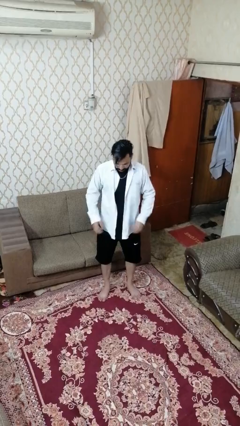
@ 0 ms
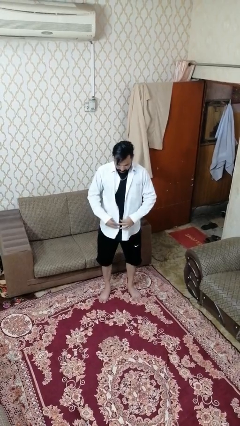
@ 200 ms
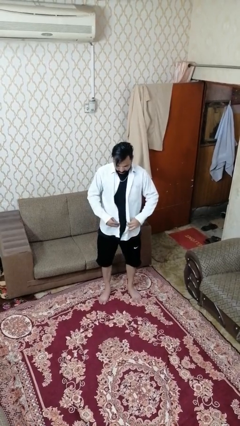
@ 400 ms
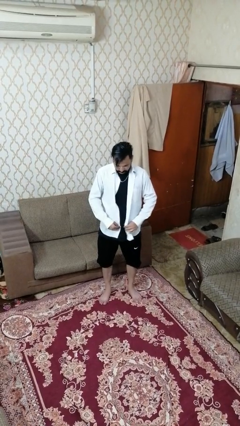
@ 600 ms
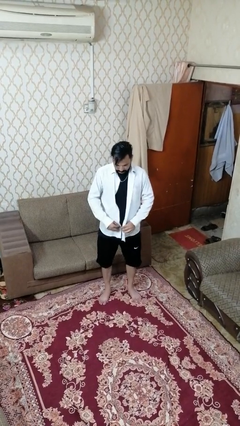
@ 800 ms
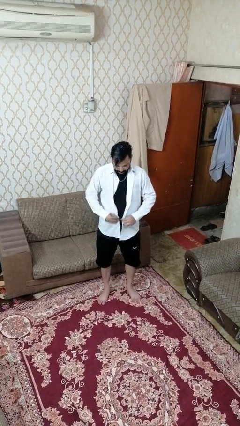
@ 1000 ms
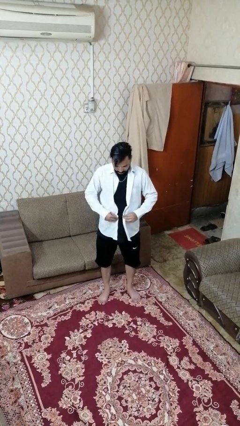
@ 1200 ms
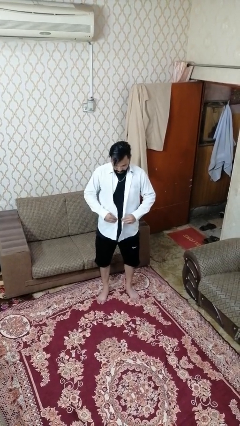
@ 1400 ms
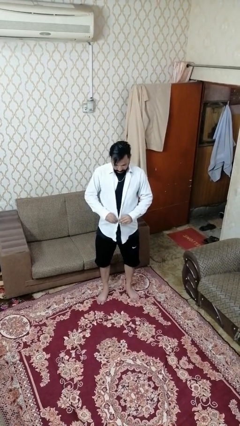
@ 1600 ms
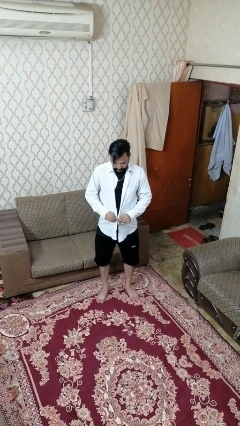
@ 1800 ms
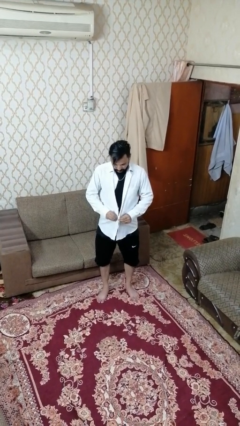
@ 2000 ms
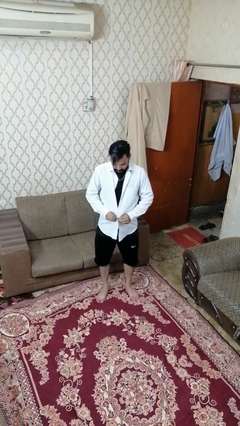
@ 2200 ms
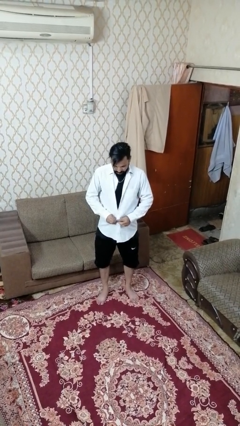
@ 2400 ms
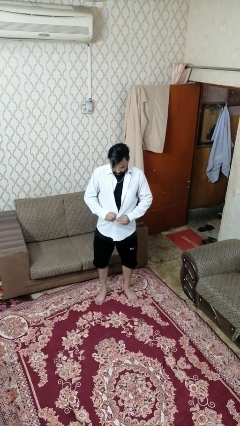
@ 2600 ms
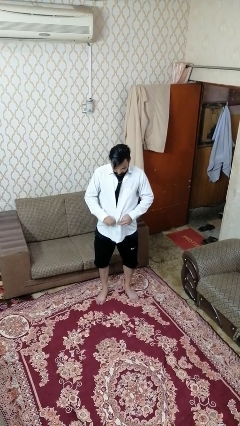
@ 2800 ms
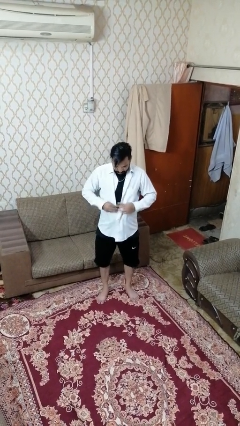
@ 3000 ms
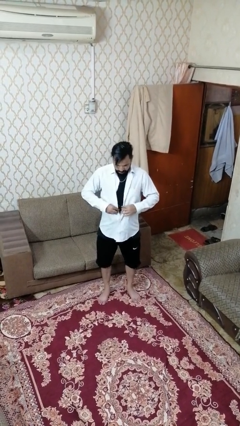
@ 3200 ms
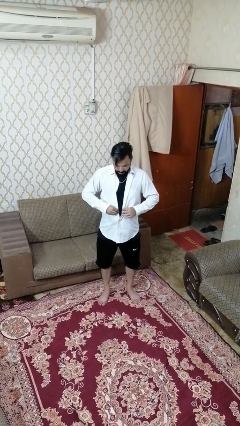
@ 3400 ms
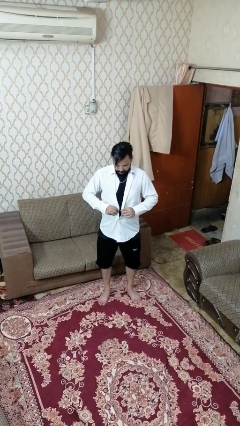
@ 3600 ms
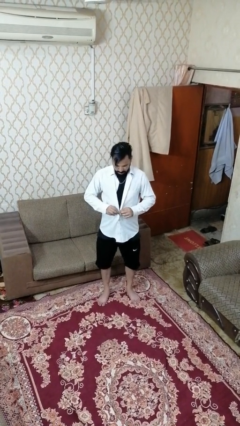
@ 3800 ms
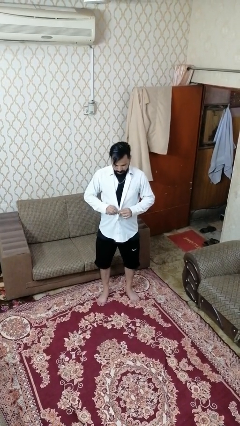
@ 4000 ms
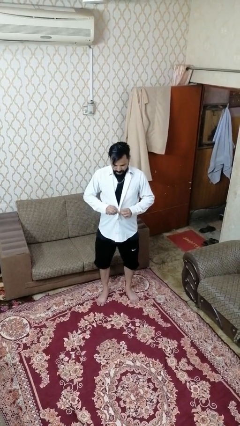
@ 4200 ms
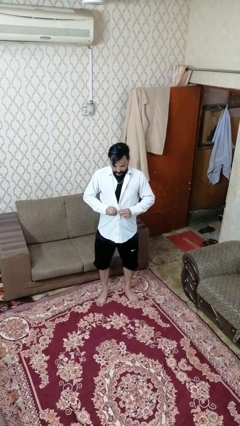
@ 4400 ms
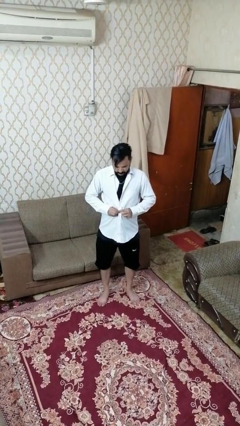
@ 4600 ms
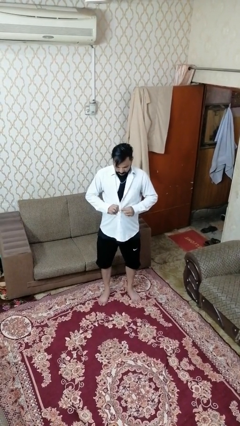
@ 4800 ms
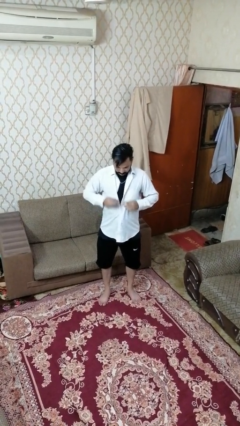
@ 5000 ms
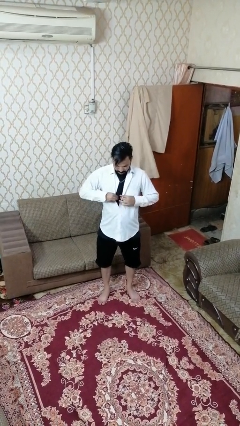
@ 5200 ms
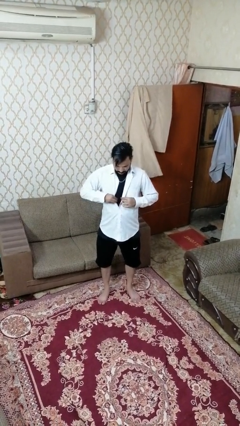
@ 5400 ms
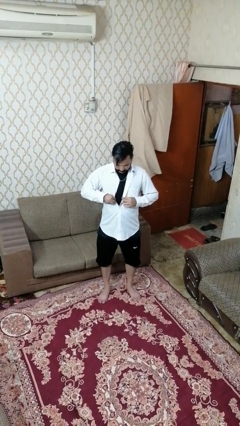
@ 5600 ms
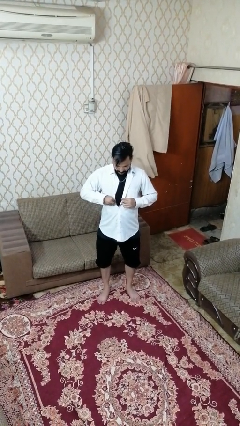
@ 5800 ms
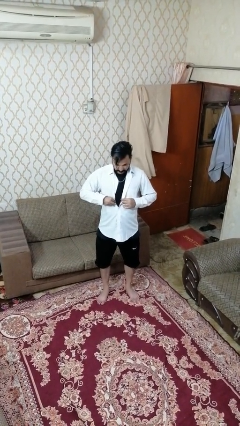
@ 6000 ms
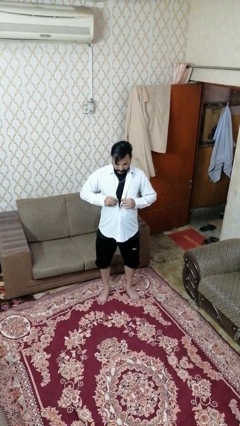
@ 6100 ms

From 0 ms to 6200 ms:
person buttons shirt

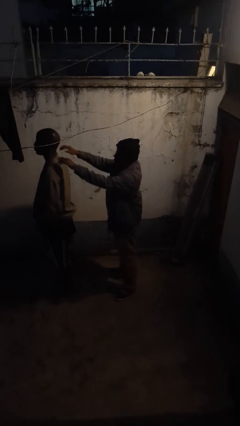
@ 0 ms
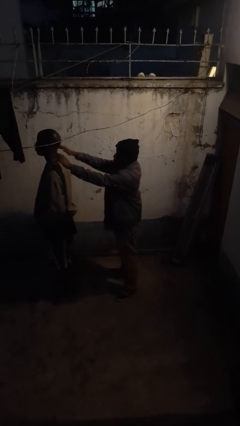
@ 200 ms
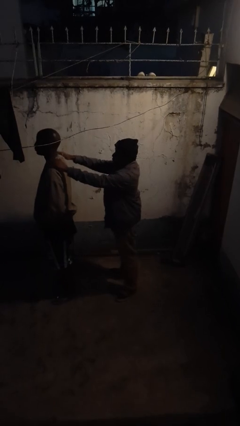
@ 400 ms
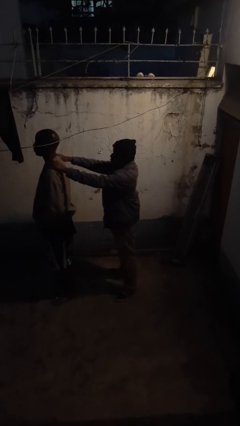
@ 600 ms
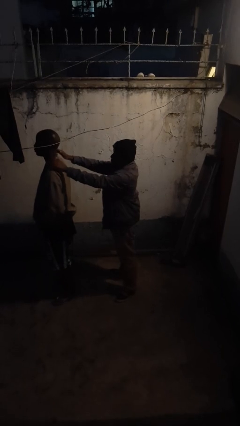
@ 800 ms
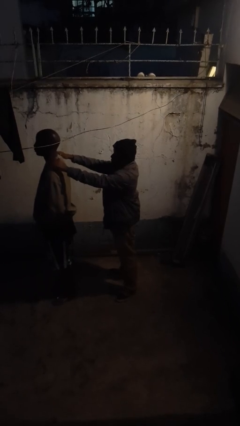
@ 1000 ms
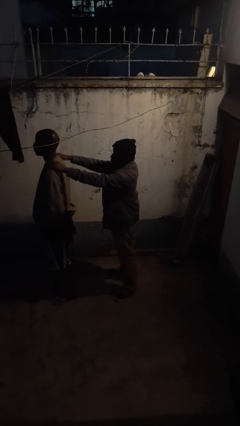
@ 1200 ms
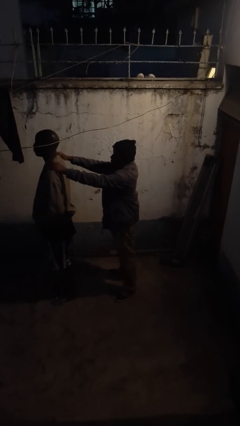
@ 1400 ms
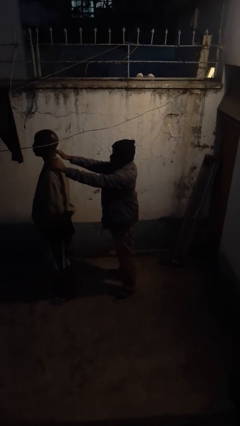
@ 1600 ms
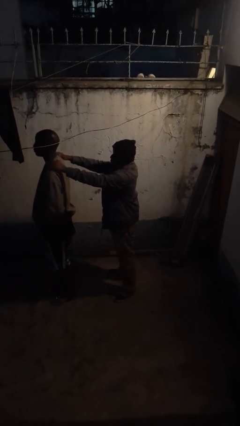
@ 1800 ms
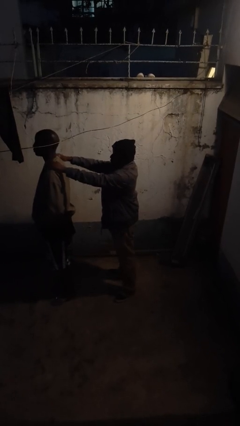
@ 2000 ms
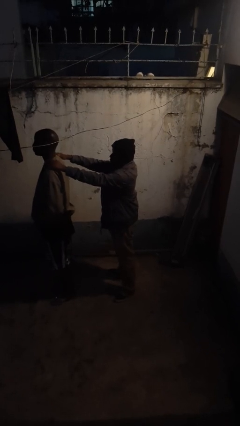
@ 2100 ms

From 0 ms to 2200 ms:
person pounds shoulders of person

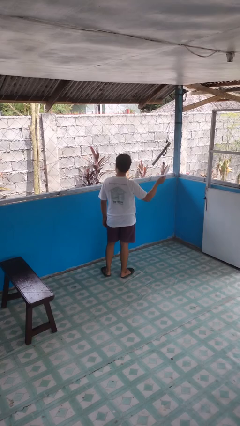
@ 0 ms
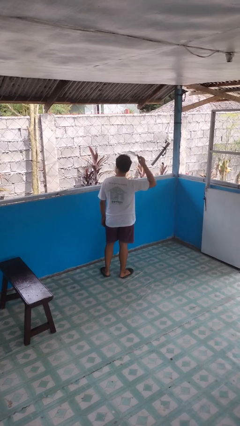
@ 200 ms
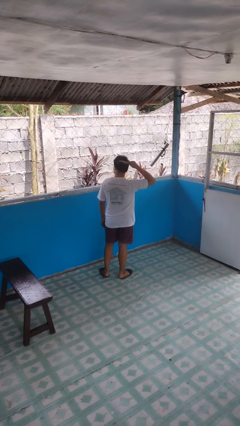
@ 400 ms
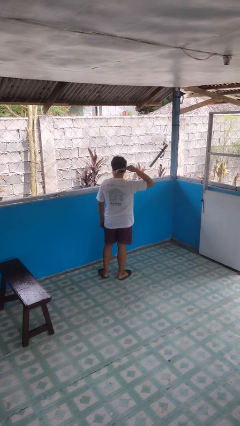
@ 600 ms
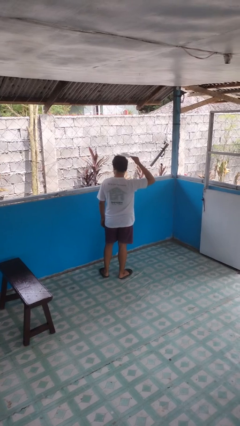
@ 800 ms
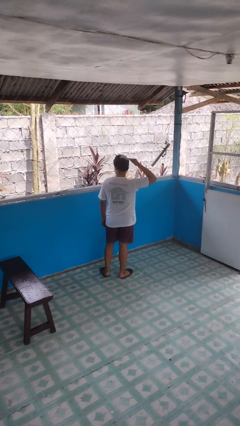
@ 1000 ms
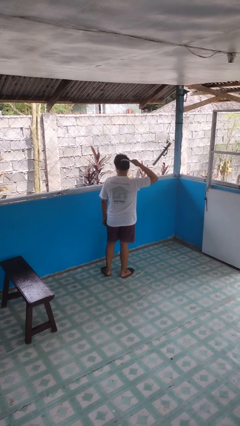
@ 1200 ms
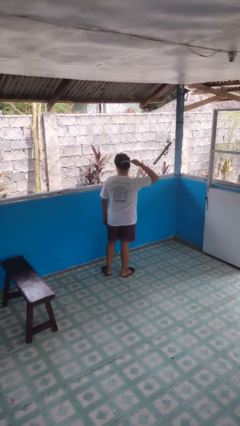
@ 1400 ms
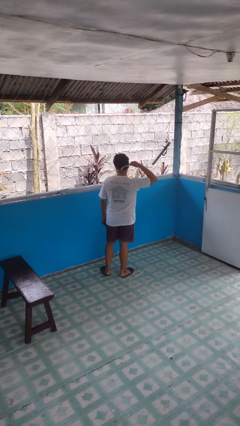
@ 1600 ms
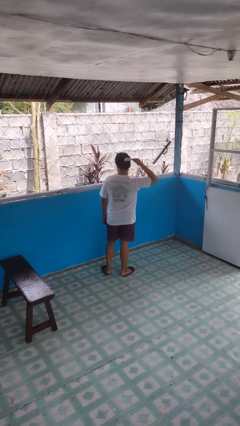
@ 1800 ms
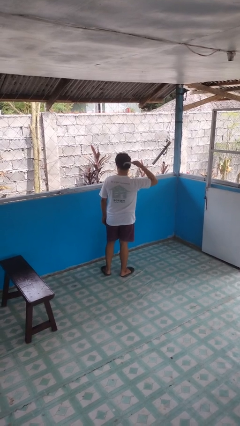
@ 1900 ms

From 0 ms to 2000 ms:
person brushes hair

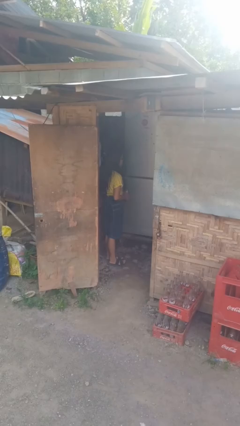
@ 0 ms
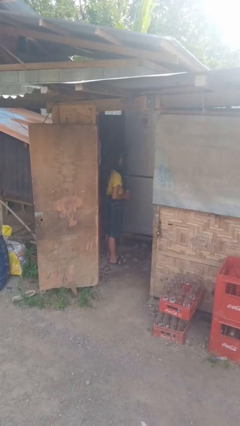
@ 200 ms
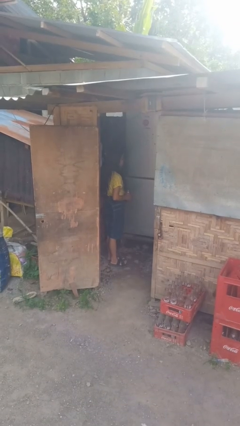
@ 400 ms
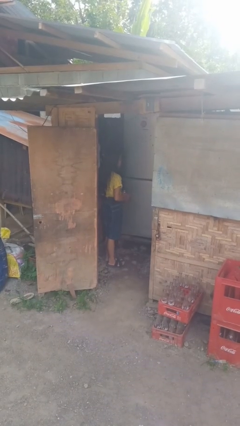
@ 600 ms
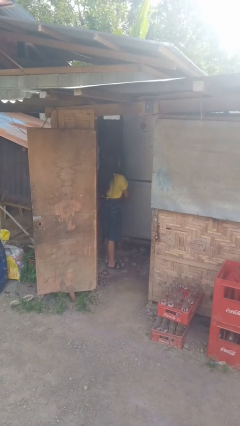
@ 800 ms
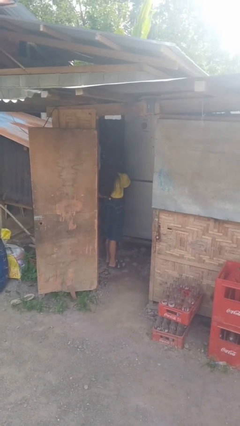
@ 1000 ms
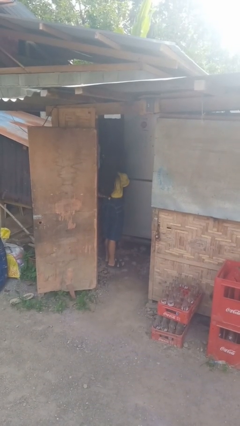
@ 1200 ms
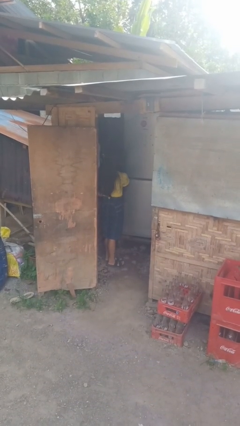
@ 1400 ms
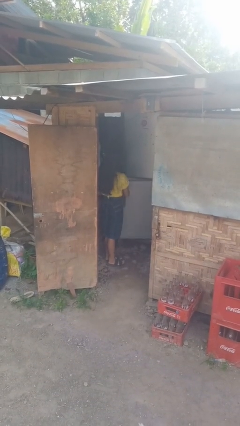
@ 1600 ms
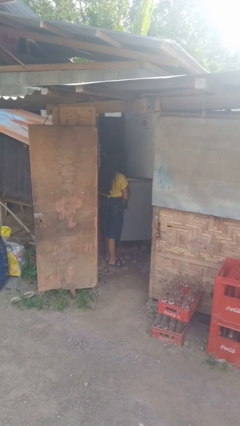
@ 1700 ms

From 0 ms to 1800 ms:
person opens refrigerator

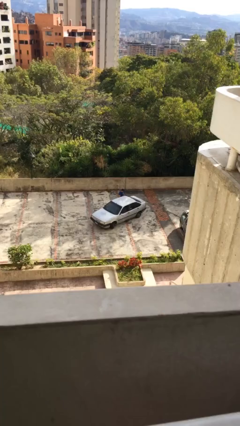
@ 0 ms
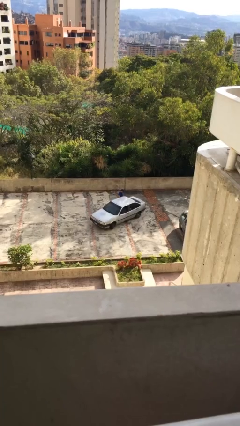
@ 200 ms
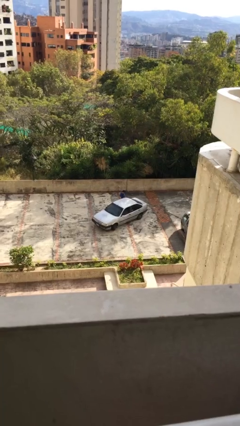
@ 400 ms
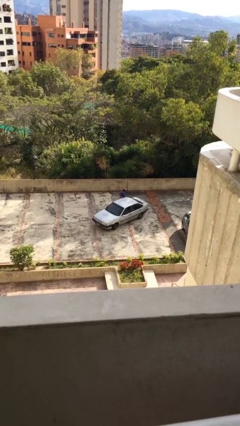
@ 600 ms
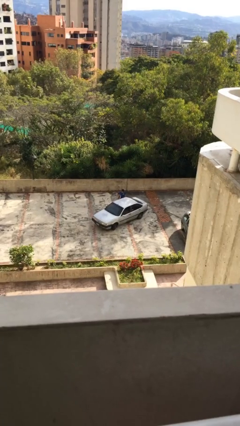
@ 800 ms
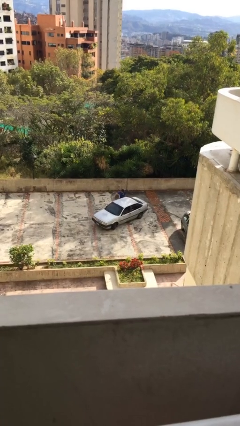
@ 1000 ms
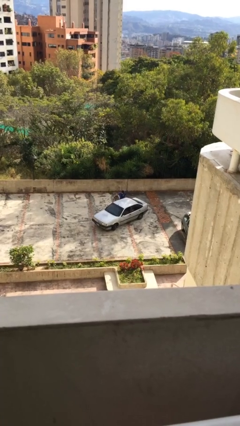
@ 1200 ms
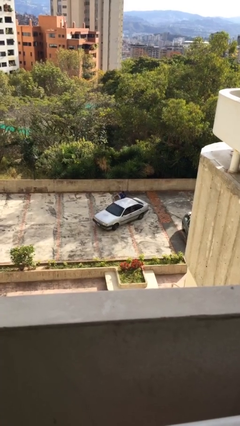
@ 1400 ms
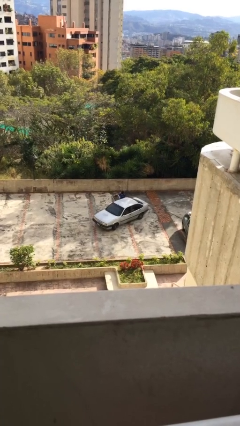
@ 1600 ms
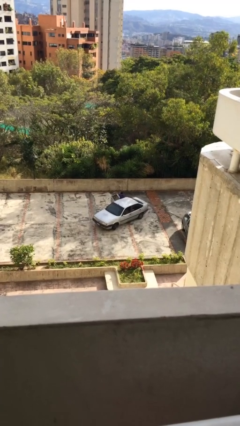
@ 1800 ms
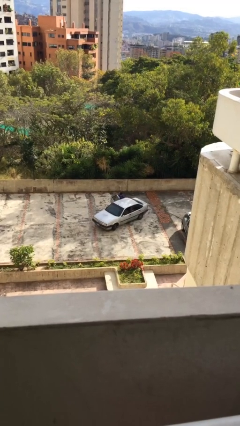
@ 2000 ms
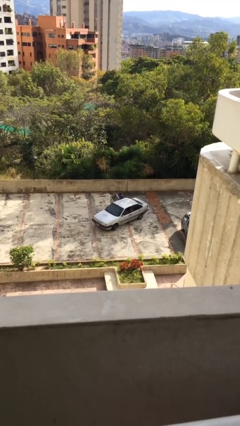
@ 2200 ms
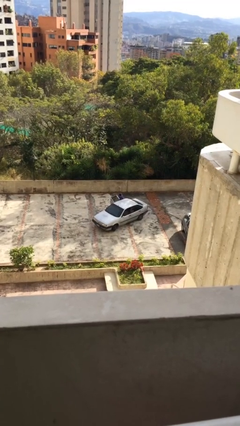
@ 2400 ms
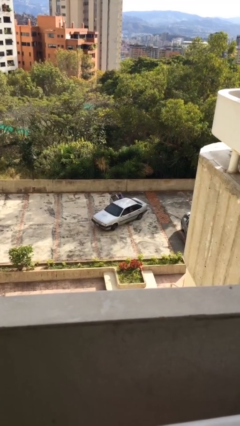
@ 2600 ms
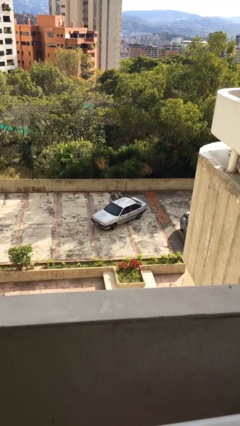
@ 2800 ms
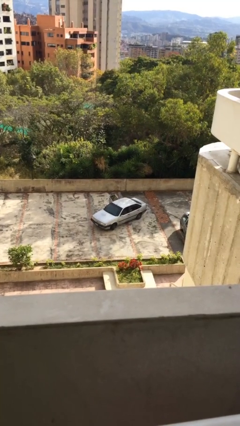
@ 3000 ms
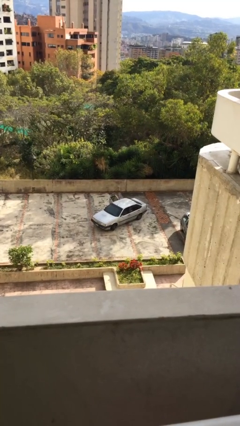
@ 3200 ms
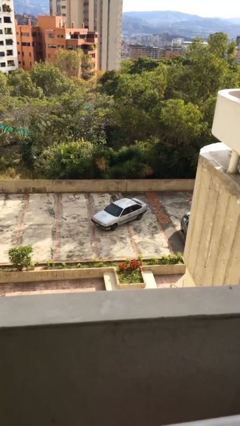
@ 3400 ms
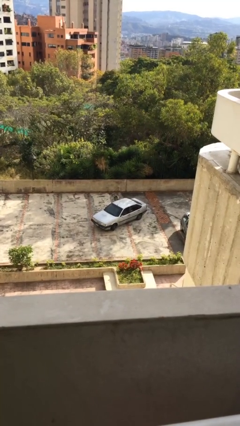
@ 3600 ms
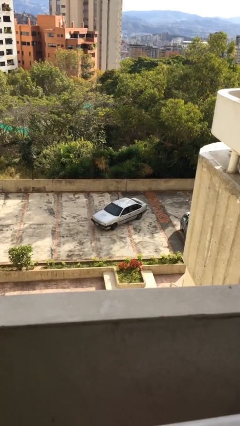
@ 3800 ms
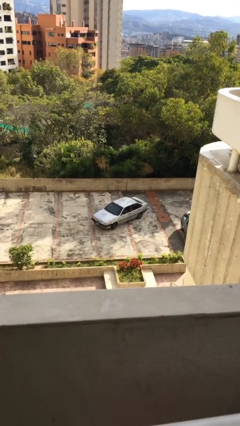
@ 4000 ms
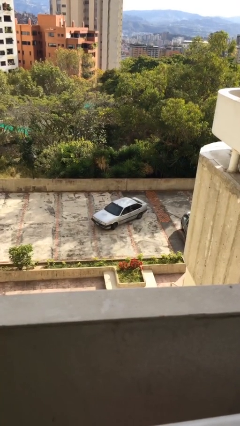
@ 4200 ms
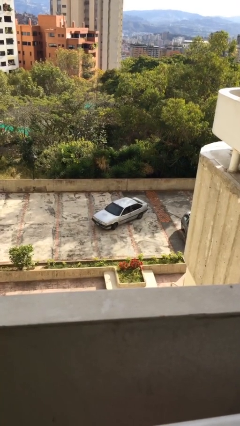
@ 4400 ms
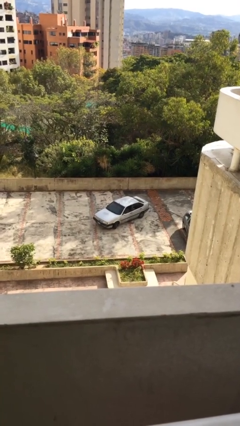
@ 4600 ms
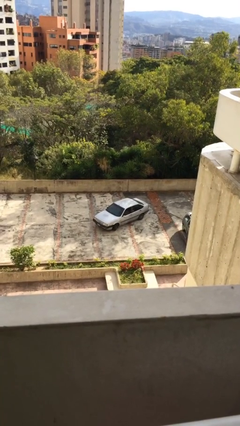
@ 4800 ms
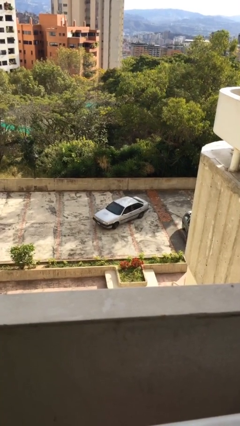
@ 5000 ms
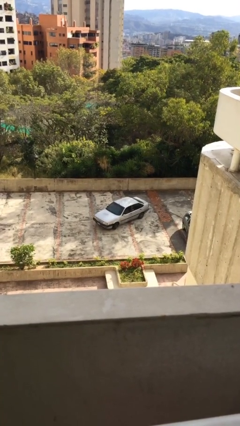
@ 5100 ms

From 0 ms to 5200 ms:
car picks up person

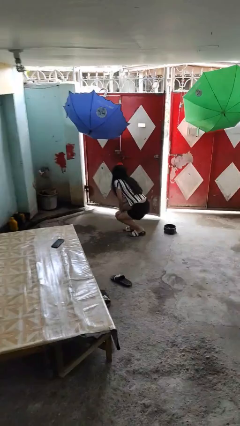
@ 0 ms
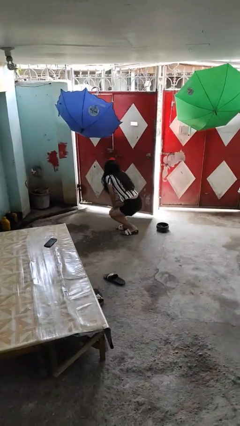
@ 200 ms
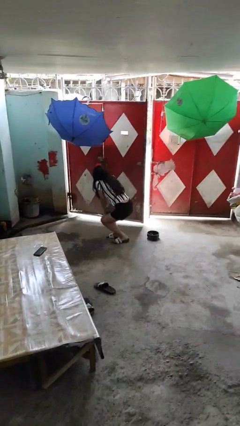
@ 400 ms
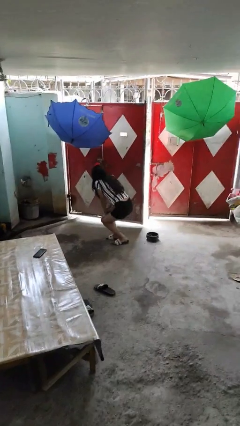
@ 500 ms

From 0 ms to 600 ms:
person lies down on floor
